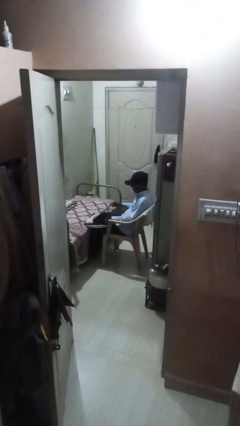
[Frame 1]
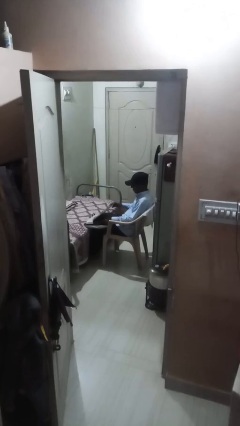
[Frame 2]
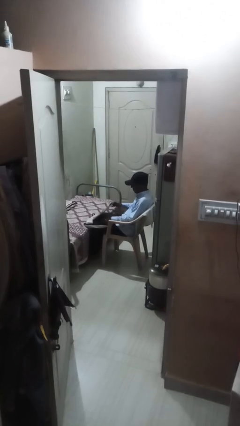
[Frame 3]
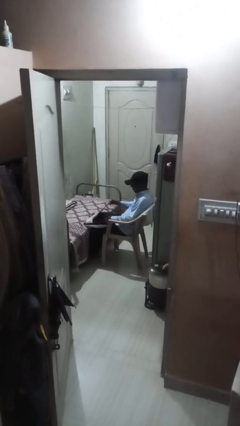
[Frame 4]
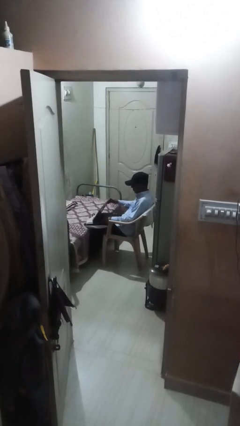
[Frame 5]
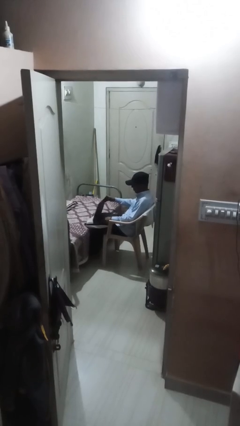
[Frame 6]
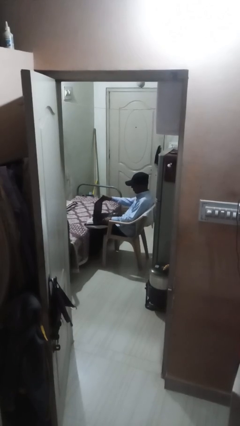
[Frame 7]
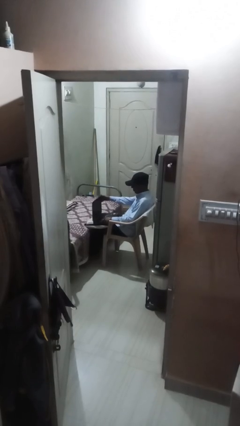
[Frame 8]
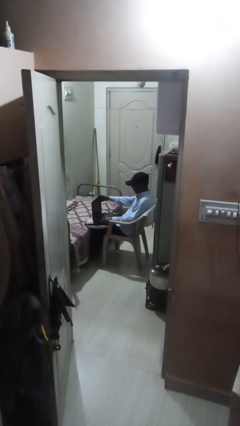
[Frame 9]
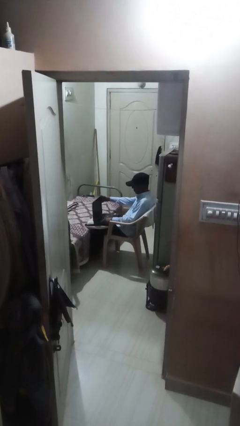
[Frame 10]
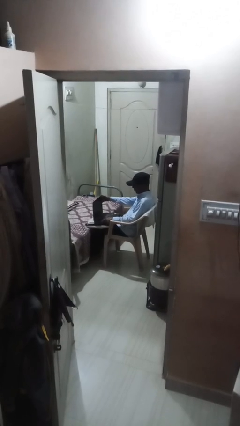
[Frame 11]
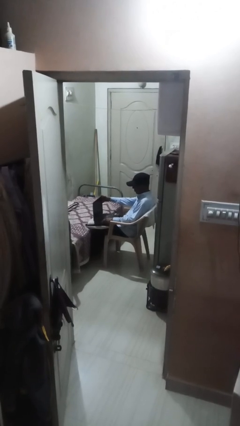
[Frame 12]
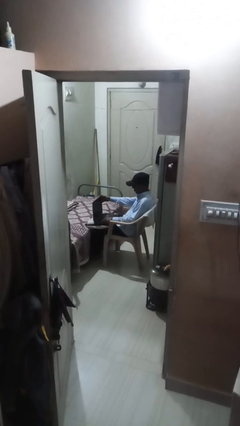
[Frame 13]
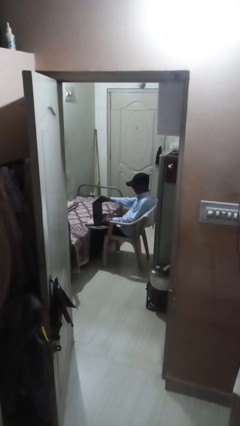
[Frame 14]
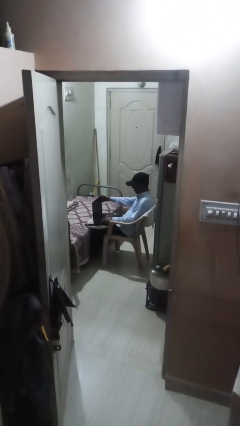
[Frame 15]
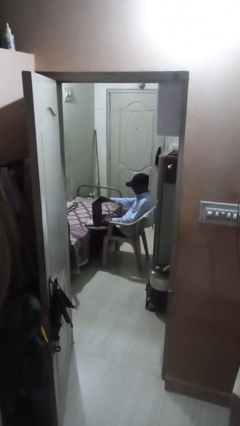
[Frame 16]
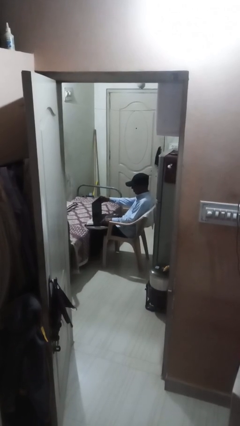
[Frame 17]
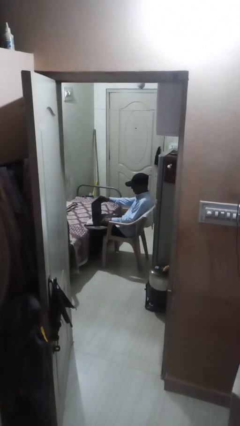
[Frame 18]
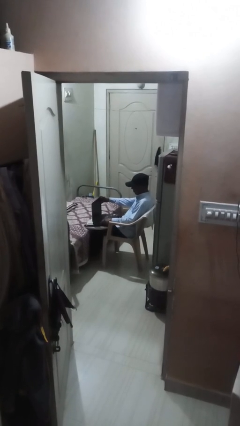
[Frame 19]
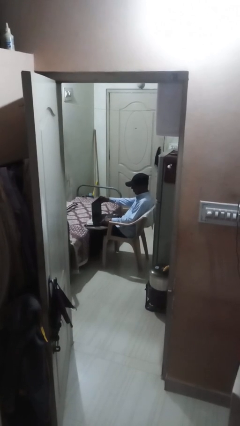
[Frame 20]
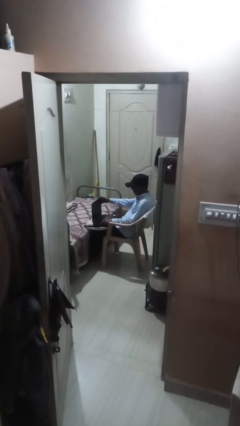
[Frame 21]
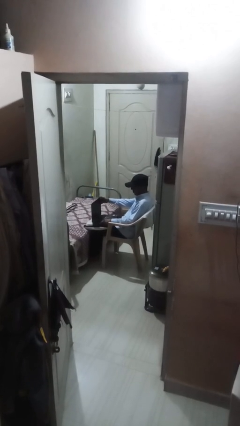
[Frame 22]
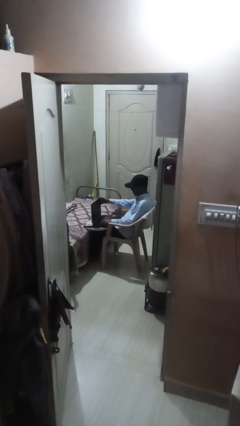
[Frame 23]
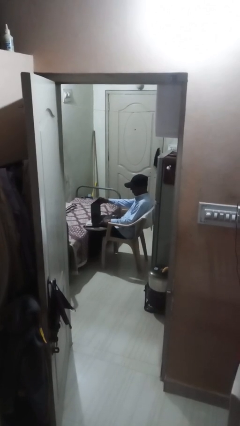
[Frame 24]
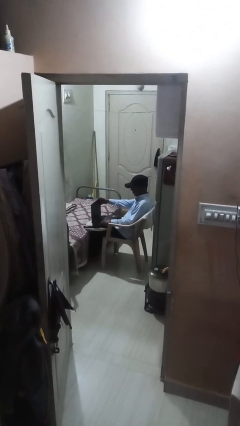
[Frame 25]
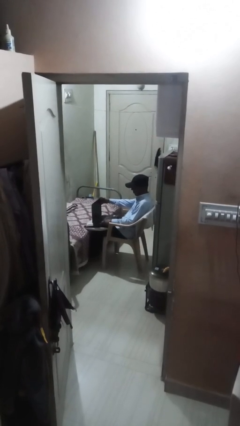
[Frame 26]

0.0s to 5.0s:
person interacts with laptop

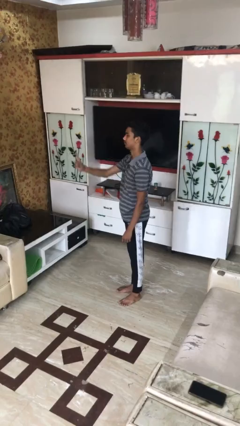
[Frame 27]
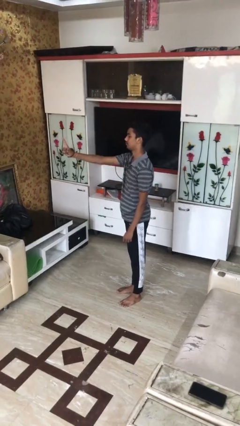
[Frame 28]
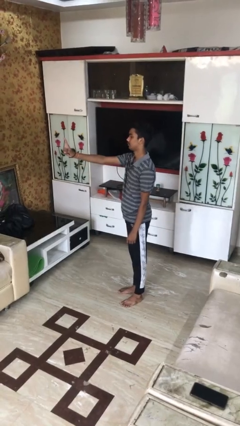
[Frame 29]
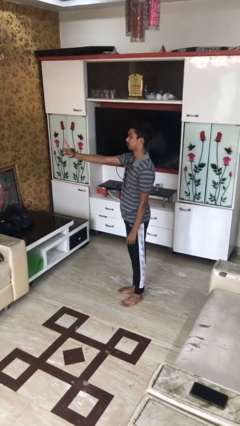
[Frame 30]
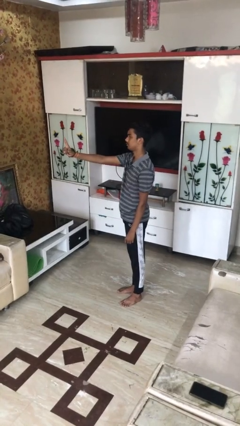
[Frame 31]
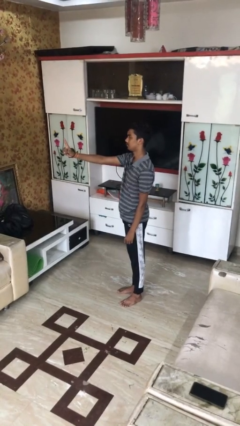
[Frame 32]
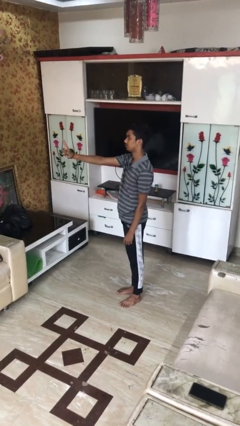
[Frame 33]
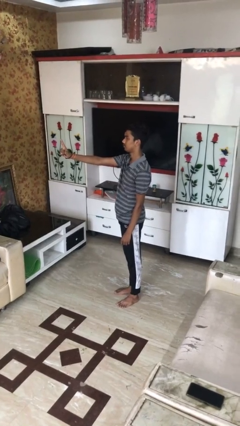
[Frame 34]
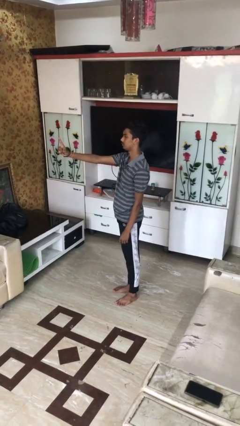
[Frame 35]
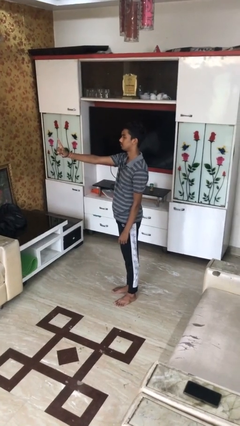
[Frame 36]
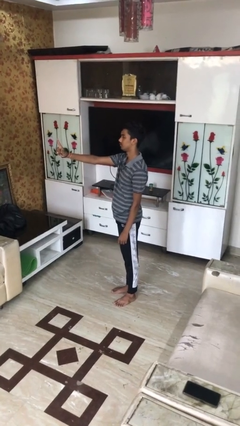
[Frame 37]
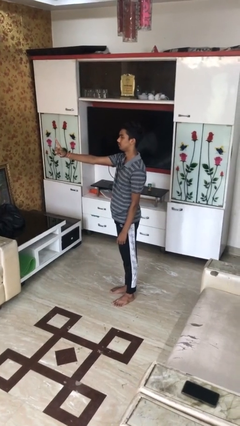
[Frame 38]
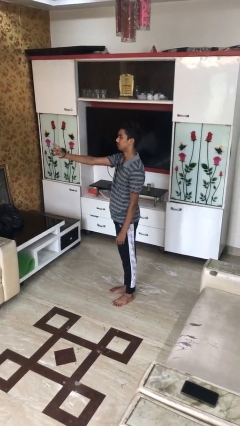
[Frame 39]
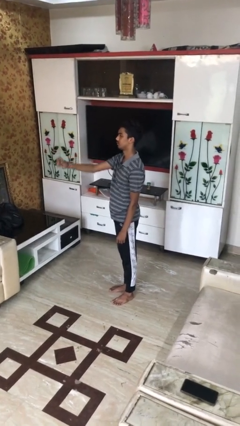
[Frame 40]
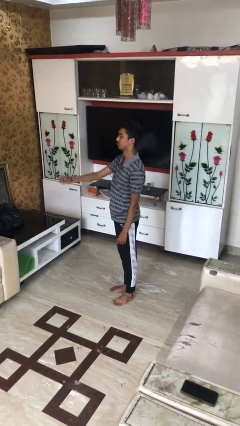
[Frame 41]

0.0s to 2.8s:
person gestures number one

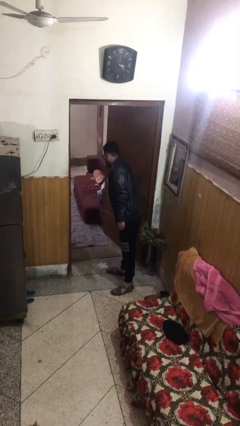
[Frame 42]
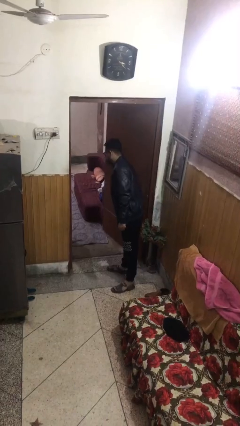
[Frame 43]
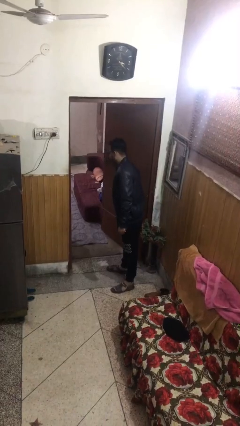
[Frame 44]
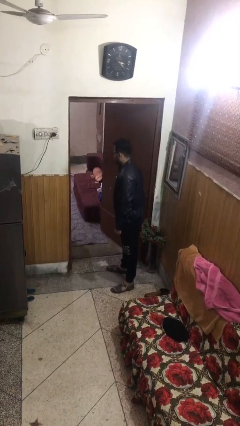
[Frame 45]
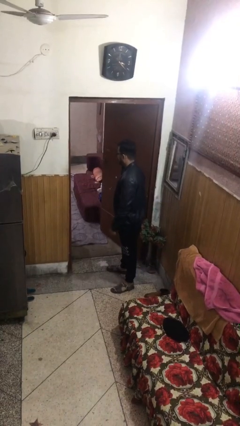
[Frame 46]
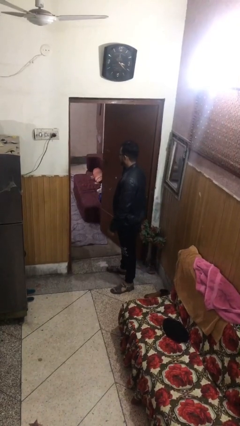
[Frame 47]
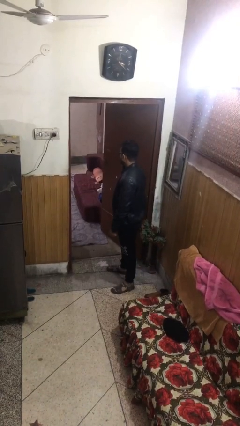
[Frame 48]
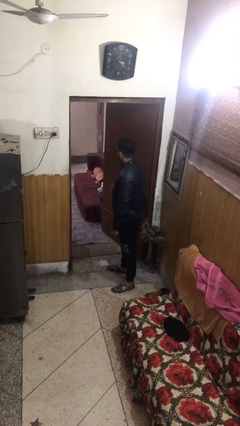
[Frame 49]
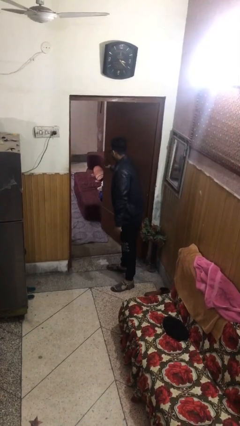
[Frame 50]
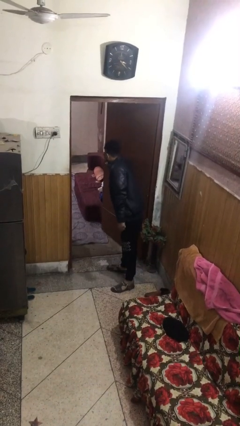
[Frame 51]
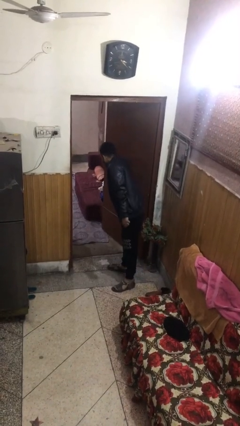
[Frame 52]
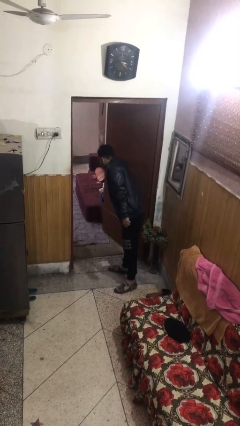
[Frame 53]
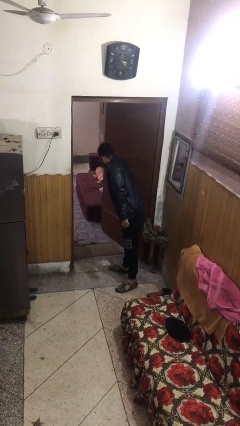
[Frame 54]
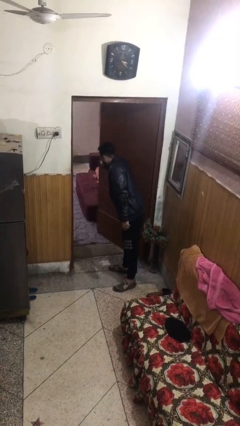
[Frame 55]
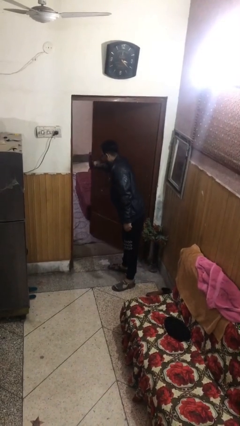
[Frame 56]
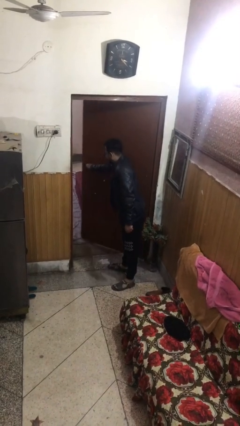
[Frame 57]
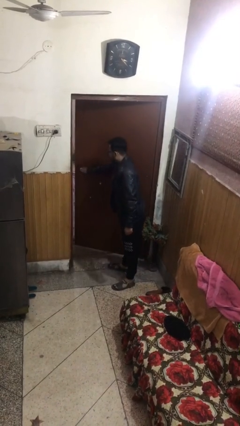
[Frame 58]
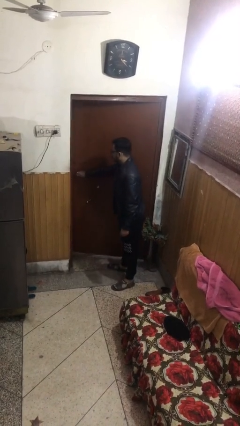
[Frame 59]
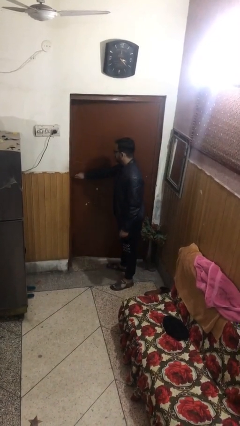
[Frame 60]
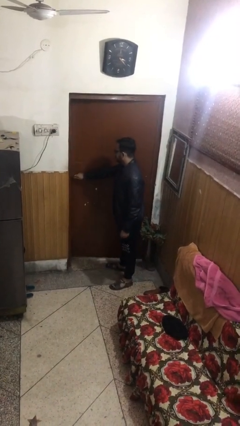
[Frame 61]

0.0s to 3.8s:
person closes facility door

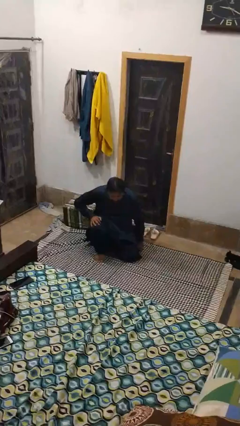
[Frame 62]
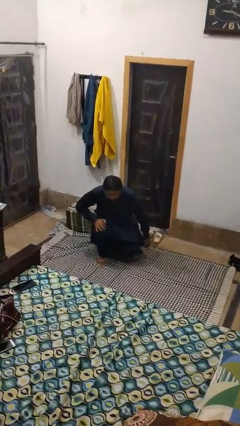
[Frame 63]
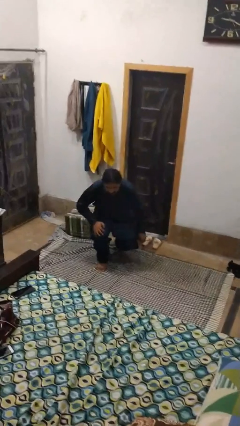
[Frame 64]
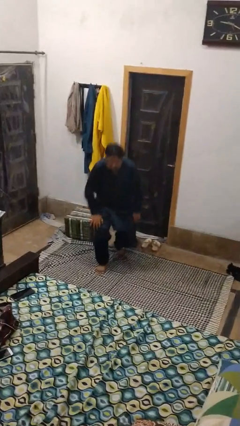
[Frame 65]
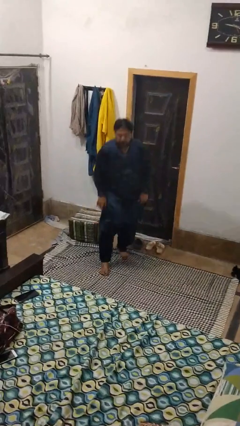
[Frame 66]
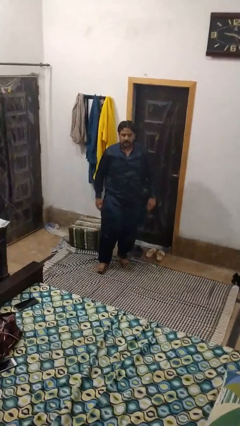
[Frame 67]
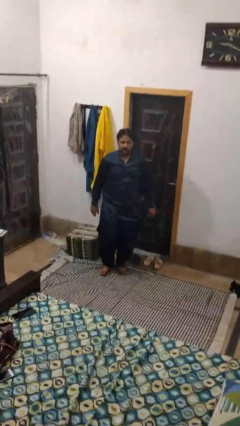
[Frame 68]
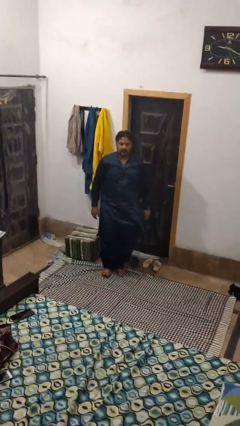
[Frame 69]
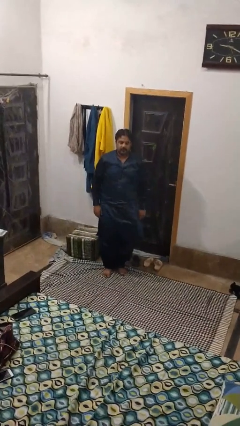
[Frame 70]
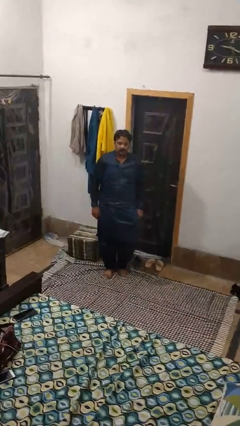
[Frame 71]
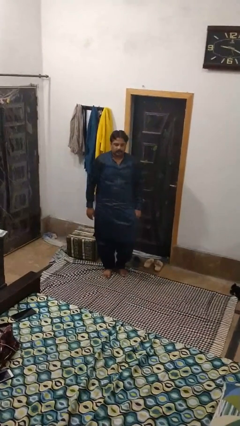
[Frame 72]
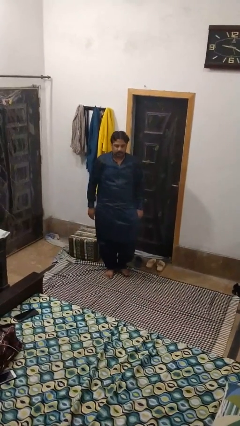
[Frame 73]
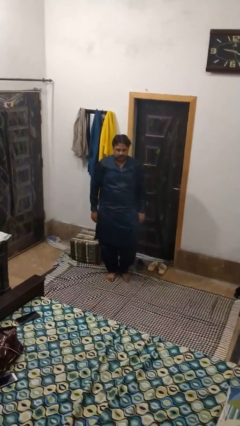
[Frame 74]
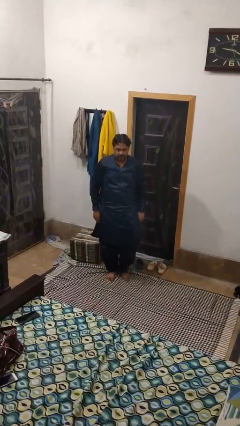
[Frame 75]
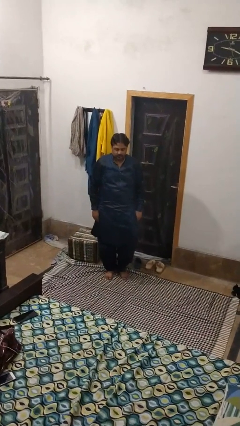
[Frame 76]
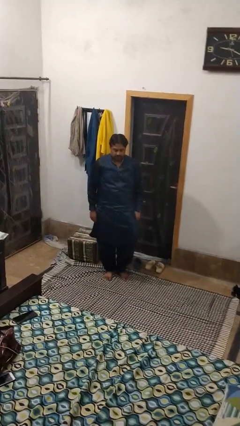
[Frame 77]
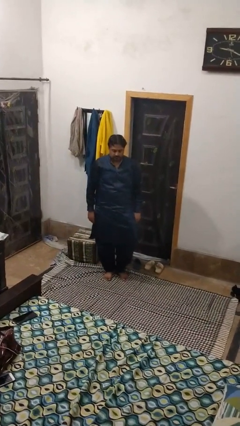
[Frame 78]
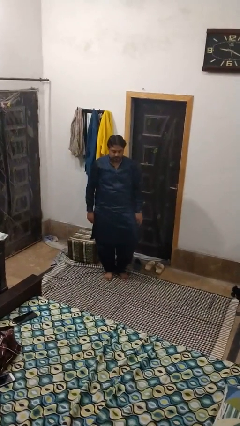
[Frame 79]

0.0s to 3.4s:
person stands up from floor

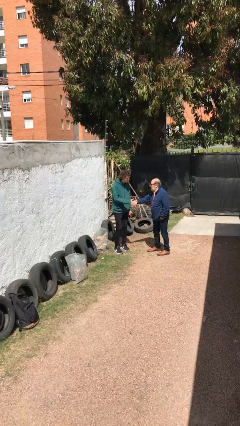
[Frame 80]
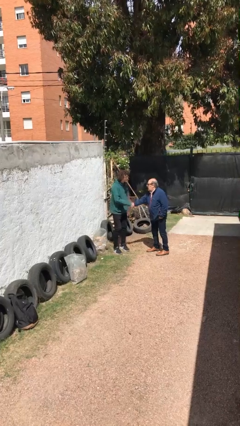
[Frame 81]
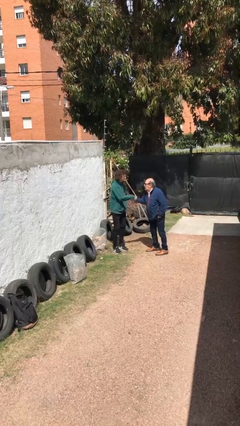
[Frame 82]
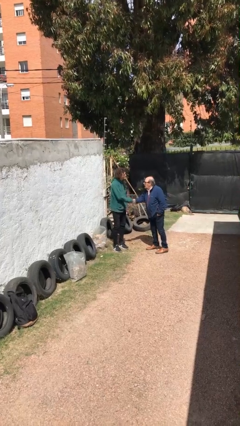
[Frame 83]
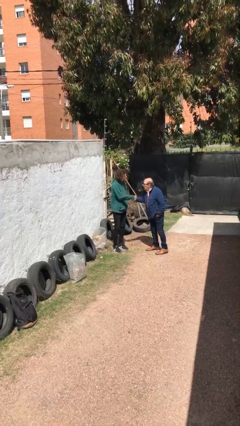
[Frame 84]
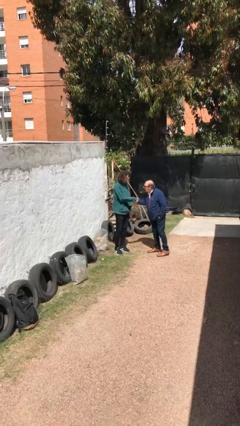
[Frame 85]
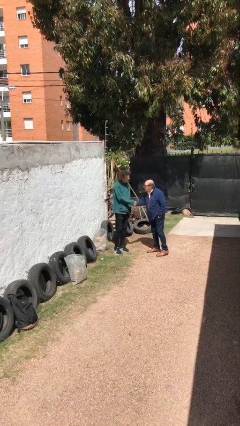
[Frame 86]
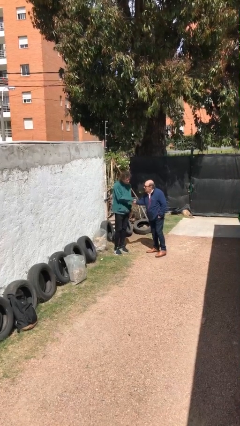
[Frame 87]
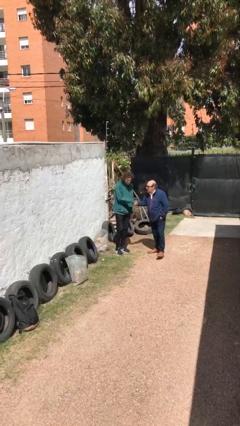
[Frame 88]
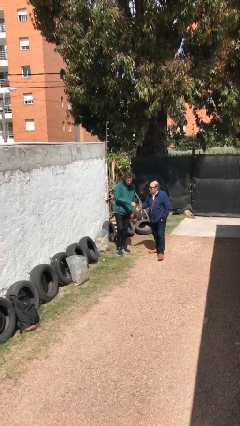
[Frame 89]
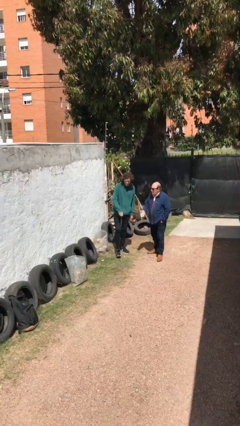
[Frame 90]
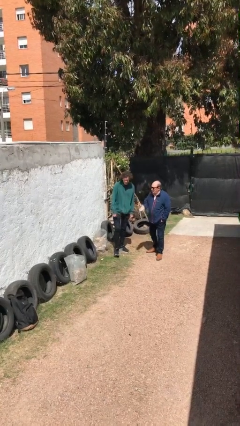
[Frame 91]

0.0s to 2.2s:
person shakes hand

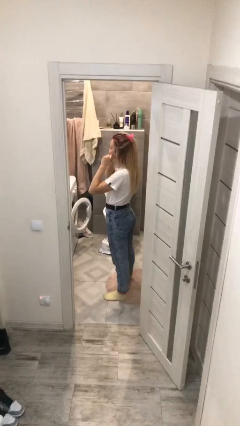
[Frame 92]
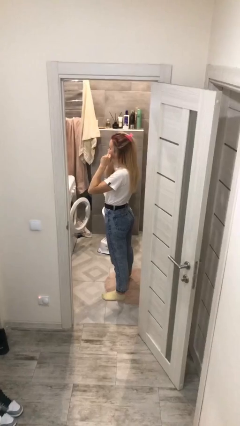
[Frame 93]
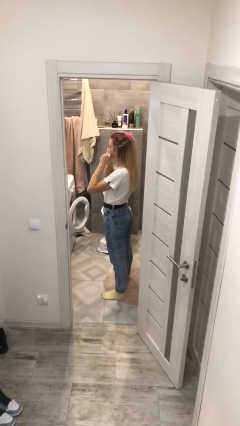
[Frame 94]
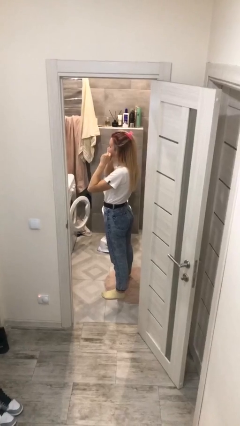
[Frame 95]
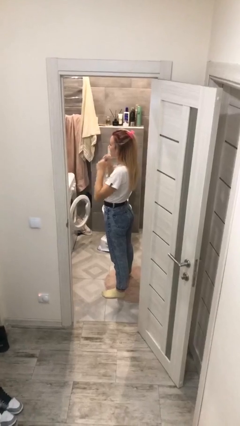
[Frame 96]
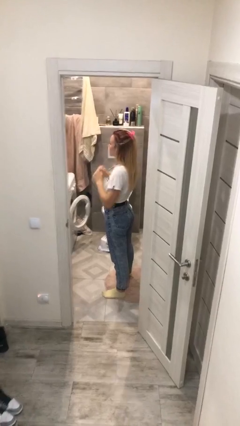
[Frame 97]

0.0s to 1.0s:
person flosses
